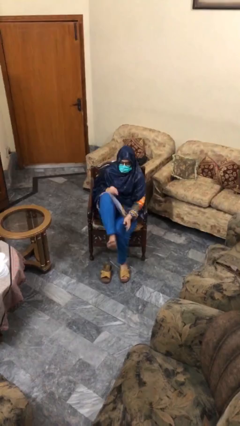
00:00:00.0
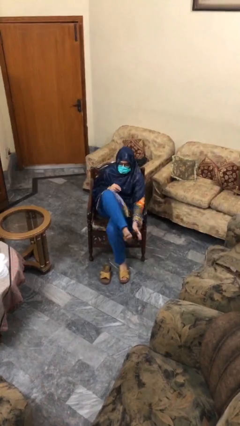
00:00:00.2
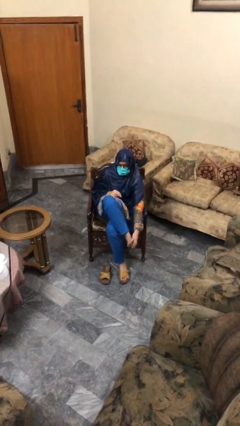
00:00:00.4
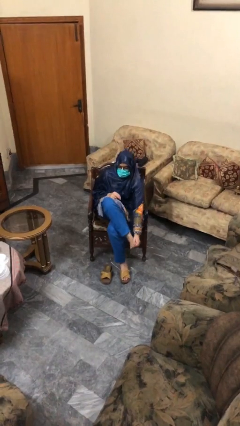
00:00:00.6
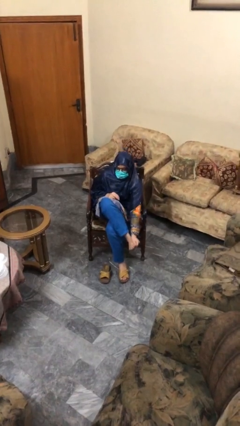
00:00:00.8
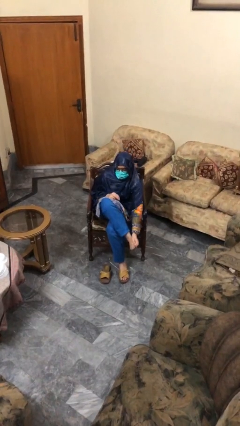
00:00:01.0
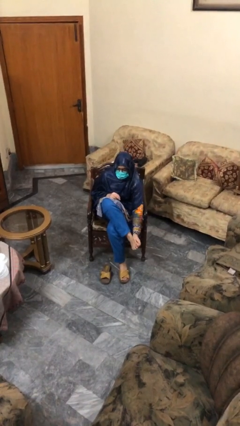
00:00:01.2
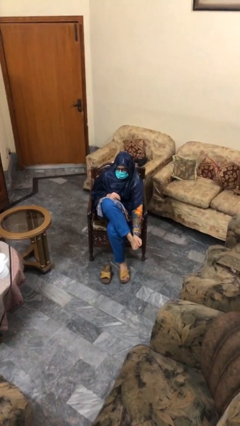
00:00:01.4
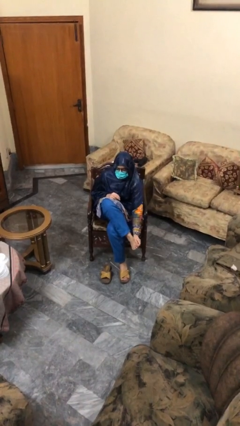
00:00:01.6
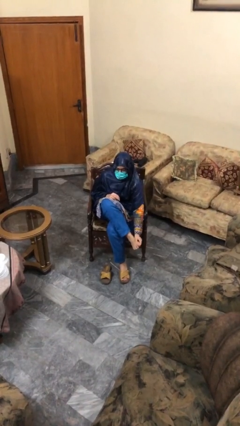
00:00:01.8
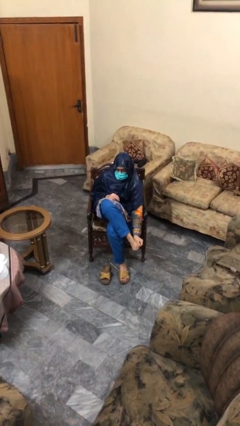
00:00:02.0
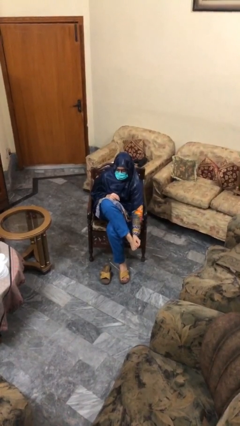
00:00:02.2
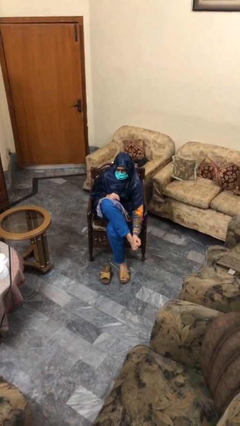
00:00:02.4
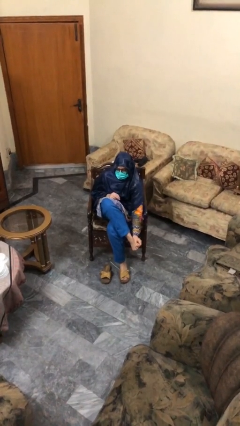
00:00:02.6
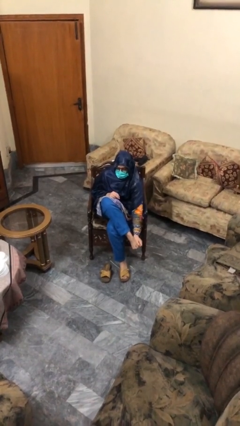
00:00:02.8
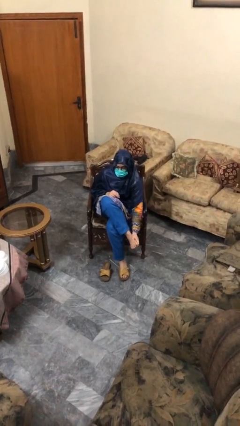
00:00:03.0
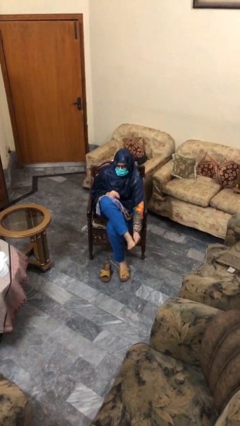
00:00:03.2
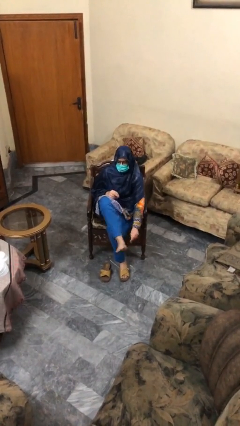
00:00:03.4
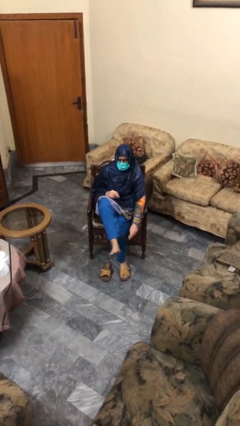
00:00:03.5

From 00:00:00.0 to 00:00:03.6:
person rubs foot

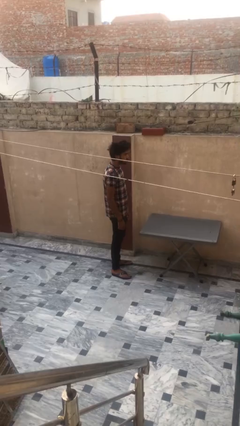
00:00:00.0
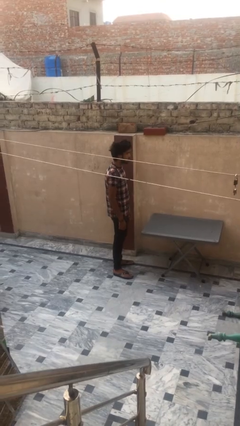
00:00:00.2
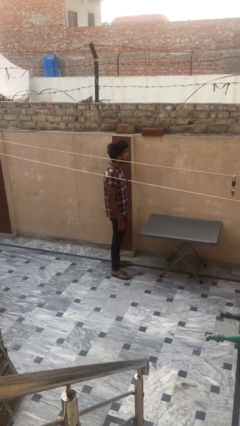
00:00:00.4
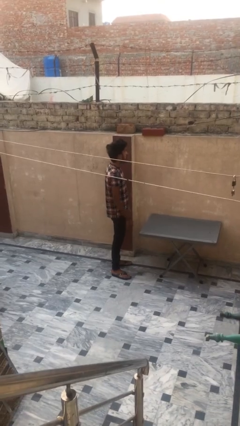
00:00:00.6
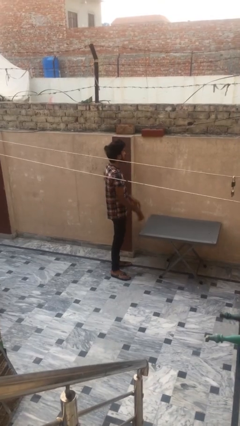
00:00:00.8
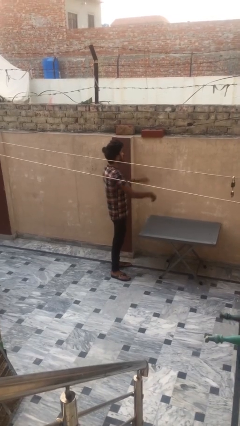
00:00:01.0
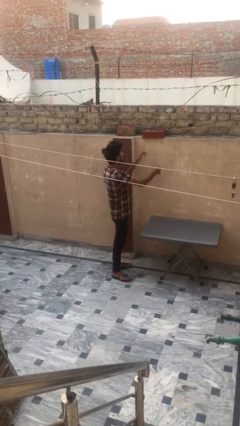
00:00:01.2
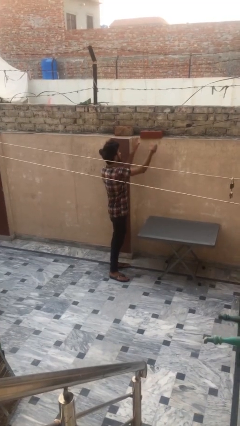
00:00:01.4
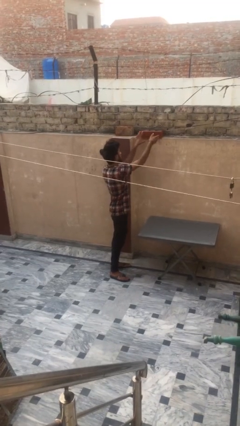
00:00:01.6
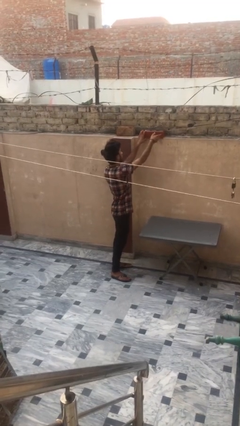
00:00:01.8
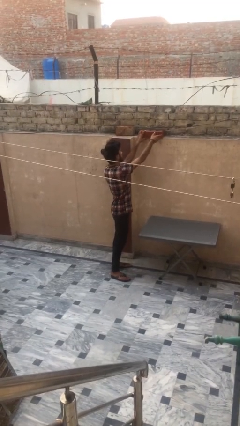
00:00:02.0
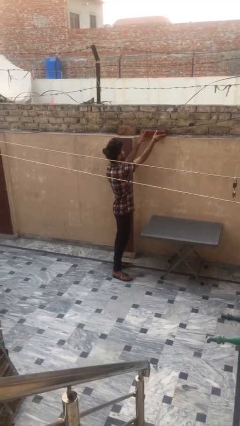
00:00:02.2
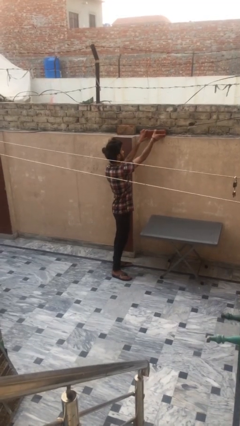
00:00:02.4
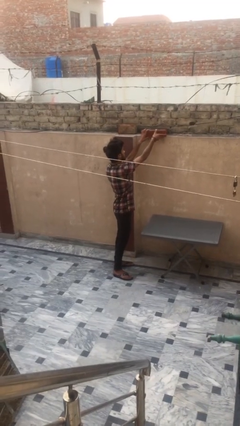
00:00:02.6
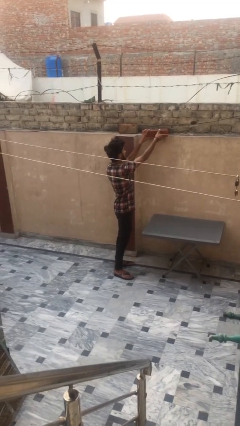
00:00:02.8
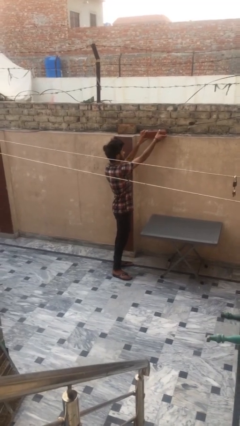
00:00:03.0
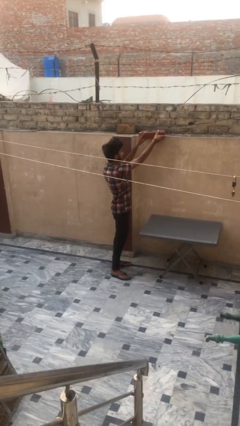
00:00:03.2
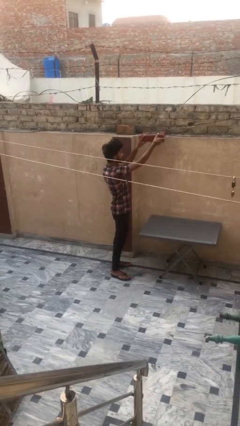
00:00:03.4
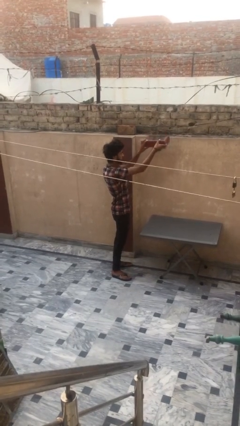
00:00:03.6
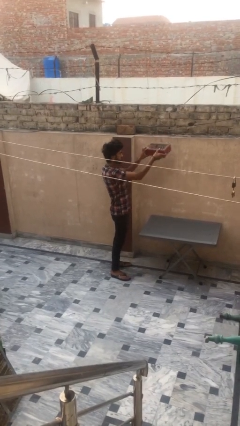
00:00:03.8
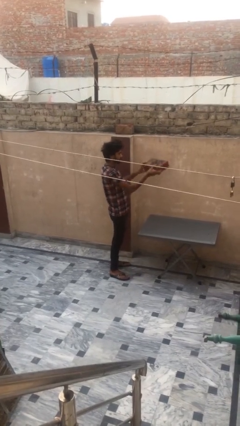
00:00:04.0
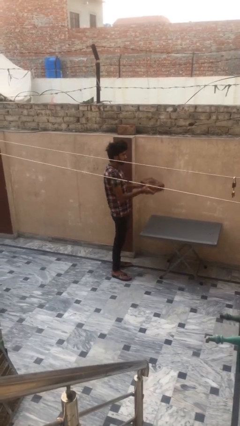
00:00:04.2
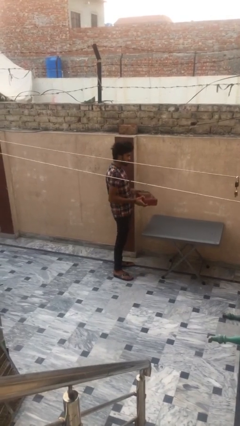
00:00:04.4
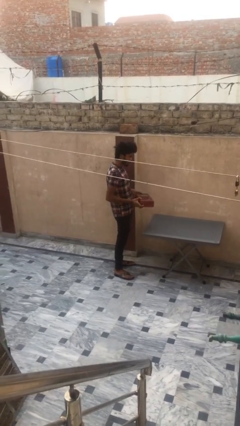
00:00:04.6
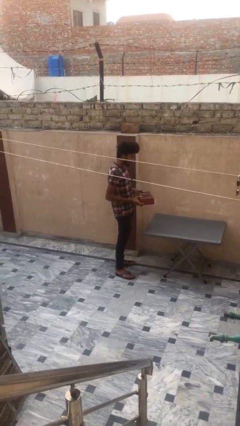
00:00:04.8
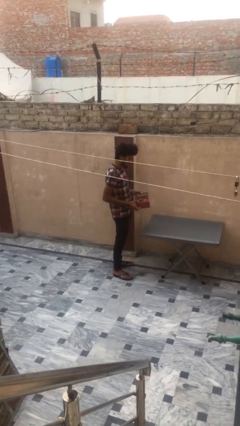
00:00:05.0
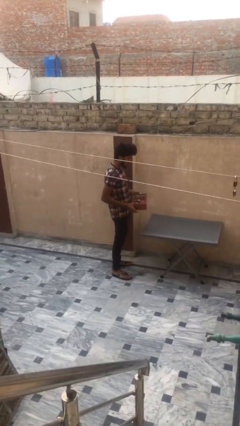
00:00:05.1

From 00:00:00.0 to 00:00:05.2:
person picks up object from shelf

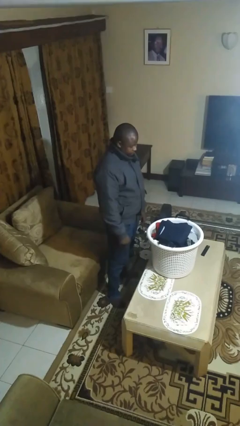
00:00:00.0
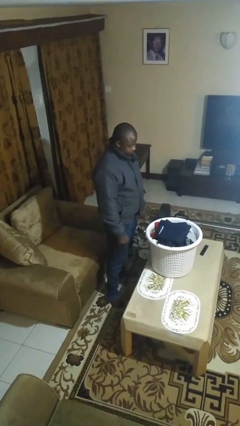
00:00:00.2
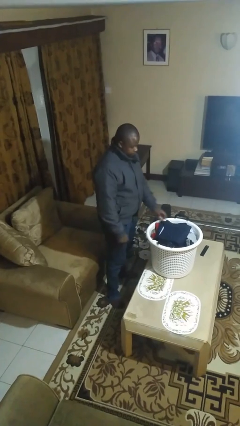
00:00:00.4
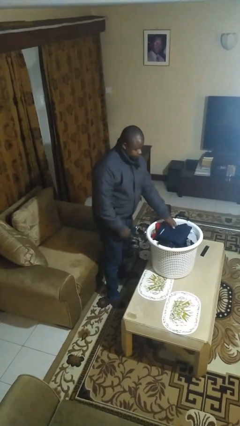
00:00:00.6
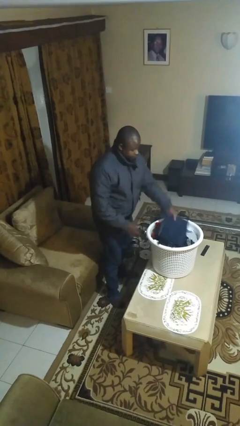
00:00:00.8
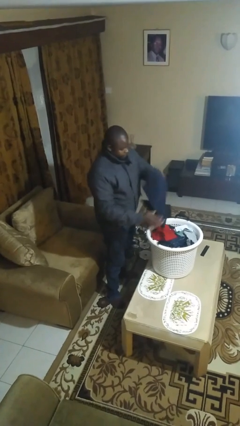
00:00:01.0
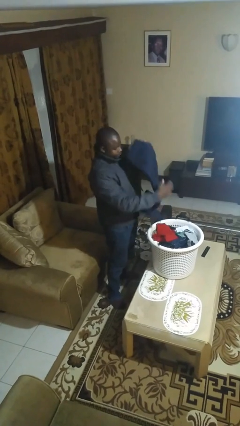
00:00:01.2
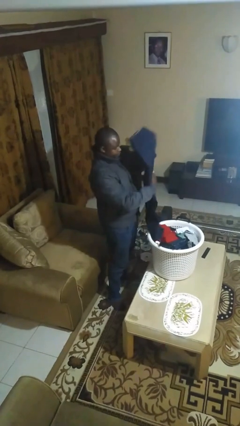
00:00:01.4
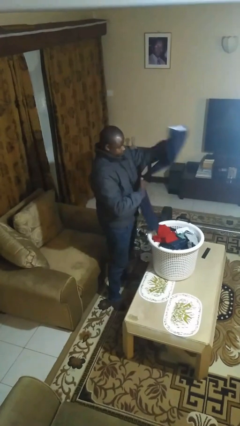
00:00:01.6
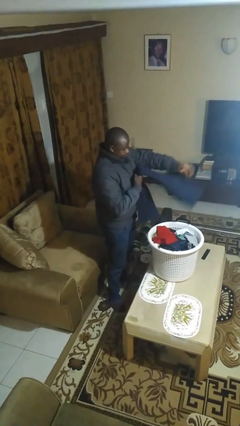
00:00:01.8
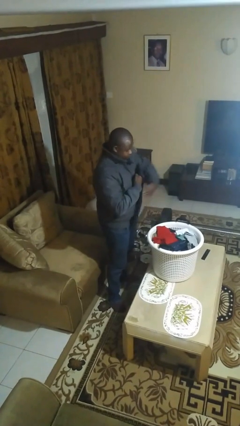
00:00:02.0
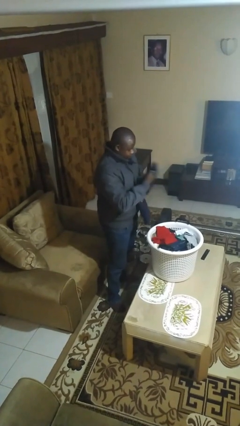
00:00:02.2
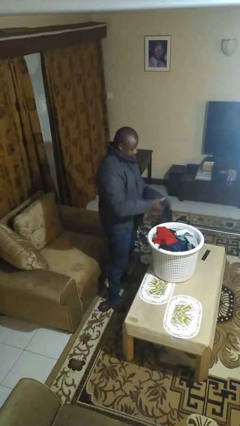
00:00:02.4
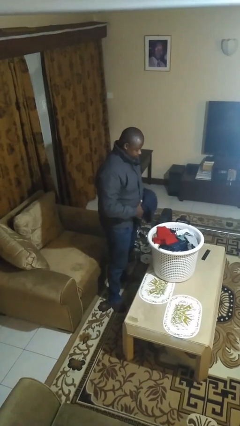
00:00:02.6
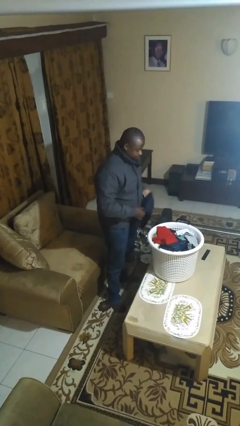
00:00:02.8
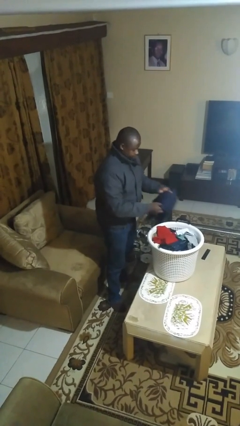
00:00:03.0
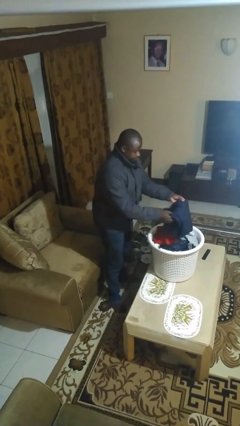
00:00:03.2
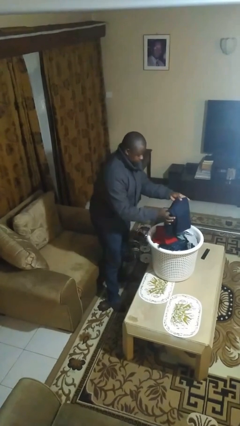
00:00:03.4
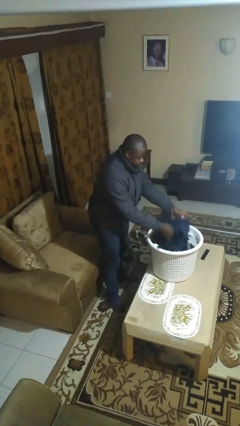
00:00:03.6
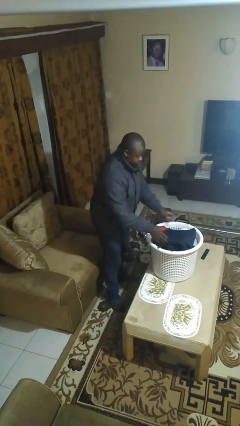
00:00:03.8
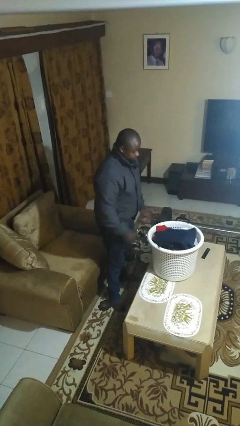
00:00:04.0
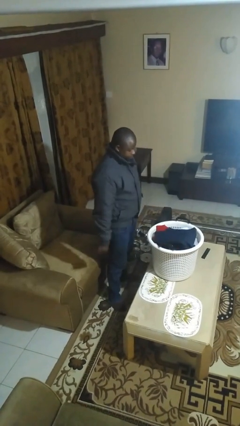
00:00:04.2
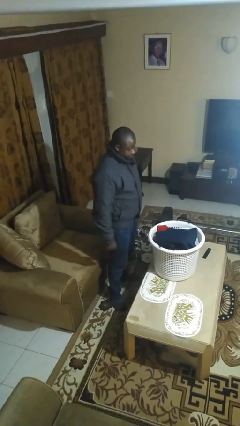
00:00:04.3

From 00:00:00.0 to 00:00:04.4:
person folds pants

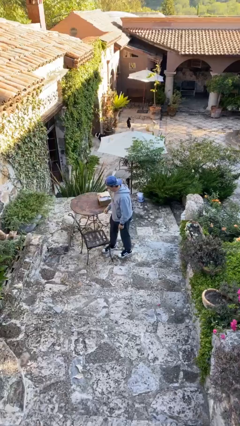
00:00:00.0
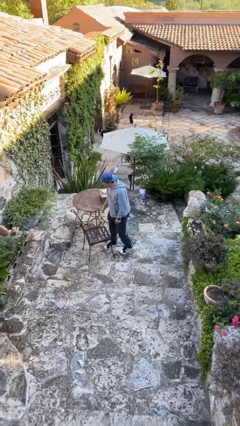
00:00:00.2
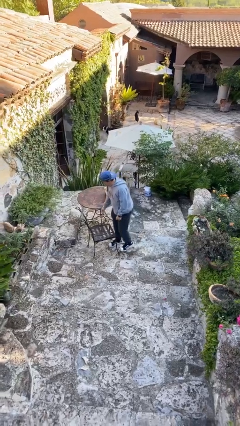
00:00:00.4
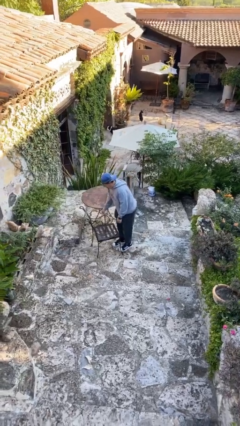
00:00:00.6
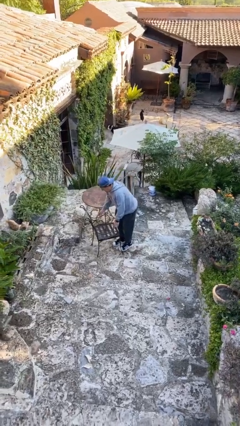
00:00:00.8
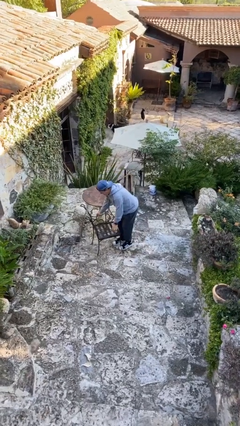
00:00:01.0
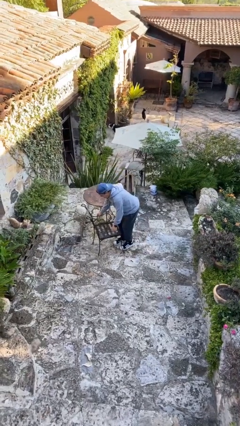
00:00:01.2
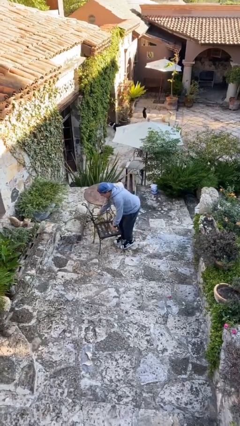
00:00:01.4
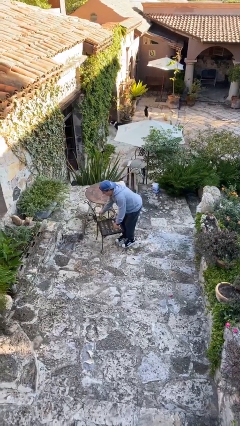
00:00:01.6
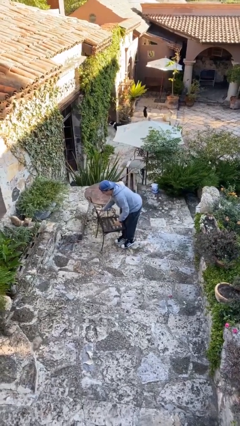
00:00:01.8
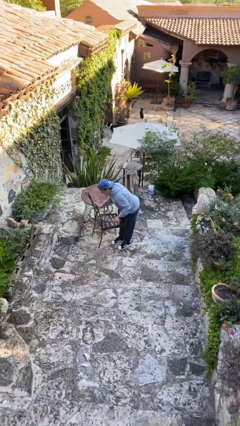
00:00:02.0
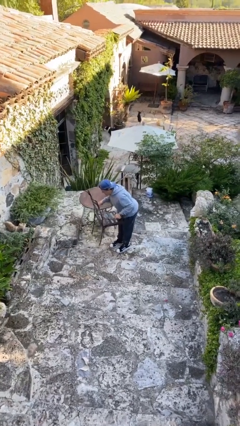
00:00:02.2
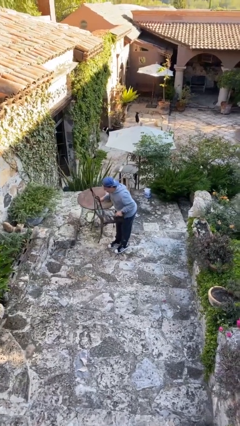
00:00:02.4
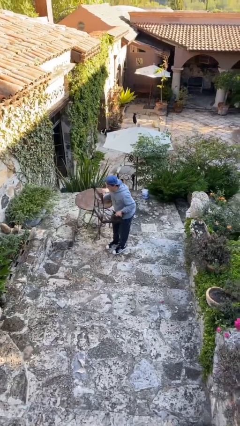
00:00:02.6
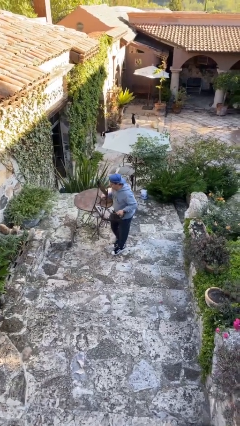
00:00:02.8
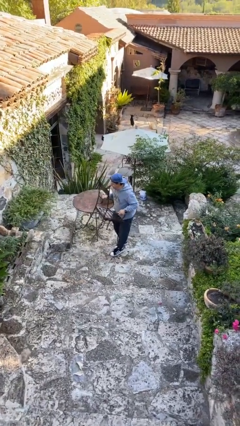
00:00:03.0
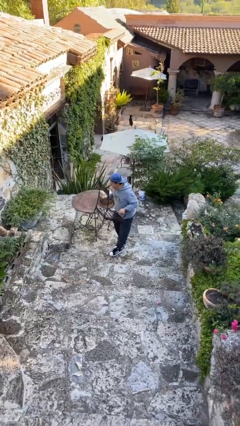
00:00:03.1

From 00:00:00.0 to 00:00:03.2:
person picks up object from floor

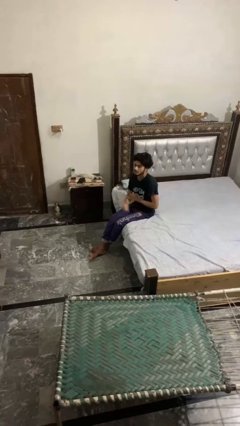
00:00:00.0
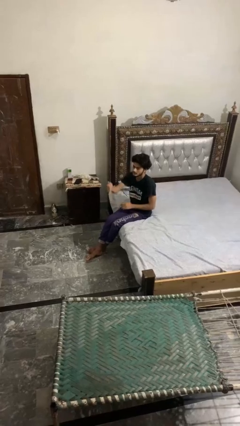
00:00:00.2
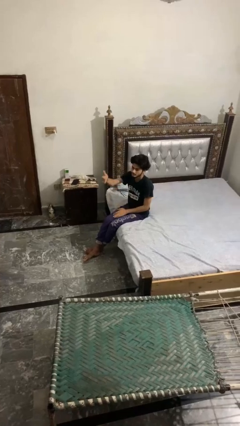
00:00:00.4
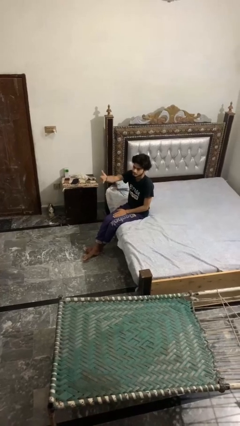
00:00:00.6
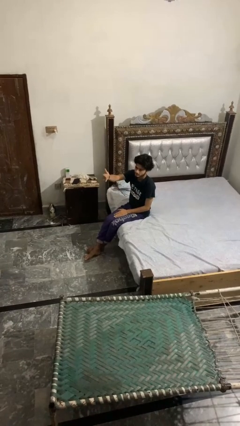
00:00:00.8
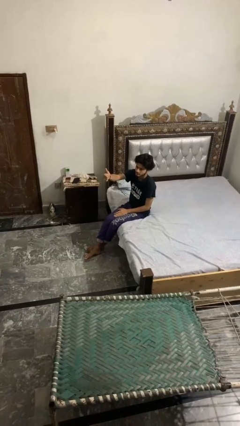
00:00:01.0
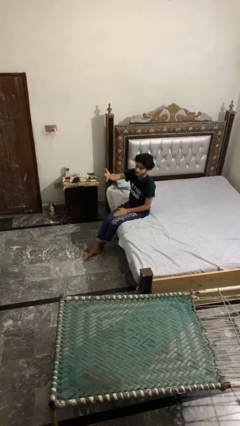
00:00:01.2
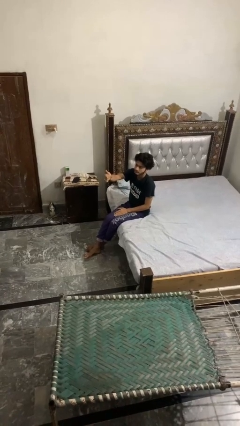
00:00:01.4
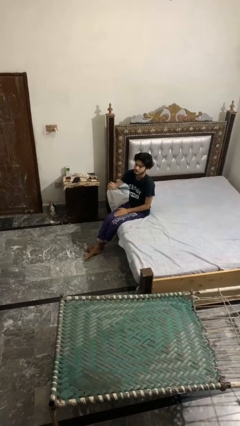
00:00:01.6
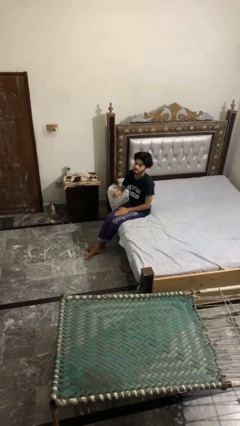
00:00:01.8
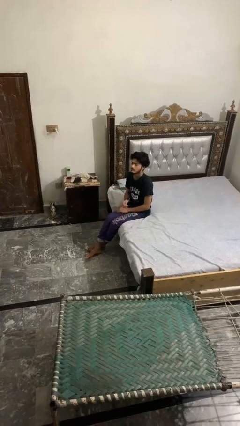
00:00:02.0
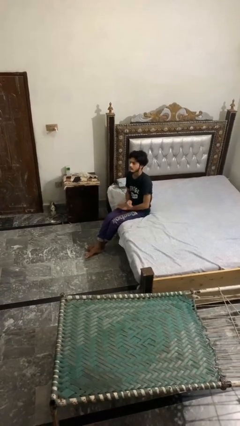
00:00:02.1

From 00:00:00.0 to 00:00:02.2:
person gestures thumbs up
